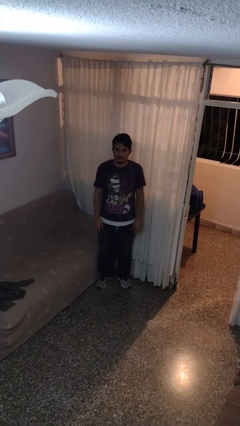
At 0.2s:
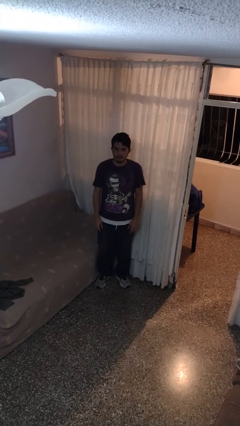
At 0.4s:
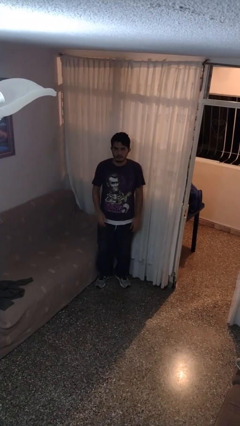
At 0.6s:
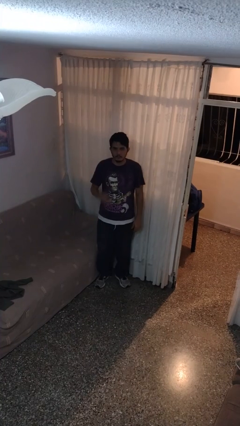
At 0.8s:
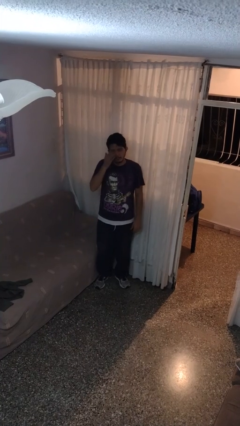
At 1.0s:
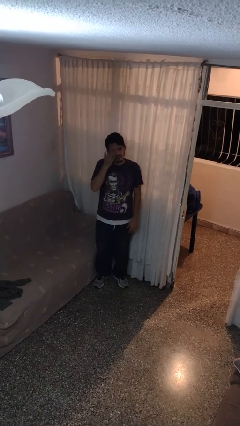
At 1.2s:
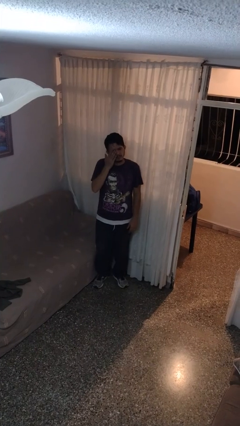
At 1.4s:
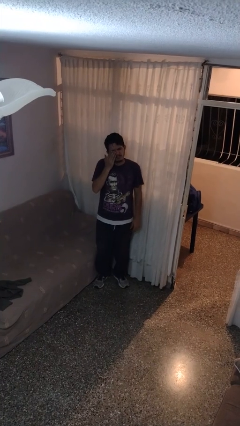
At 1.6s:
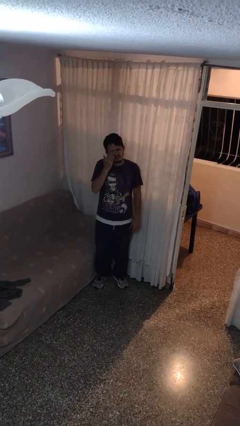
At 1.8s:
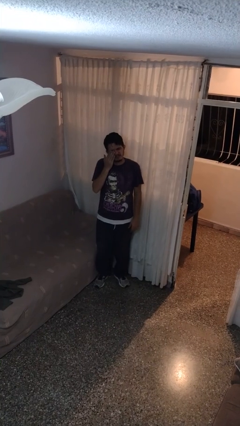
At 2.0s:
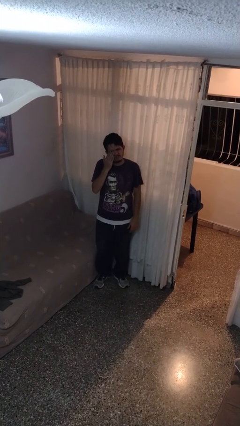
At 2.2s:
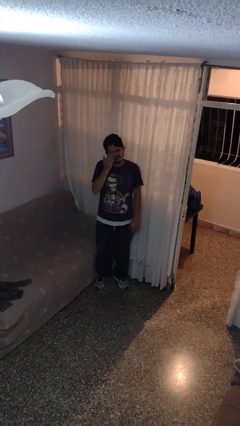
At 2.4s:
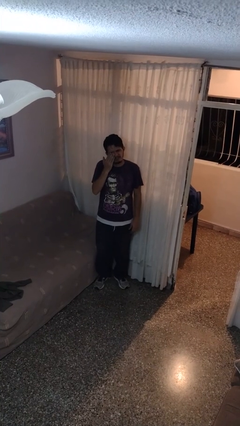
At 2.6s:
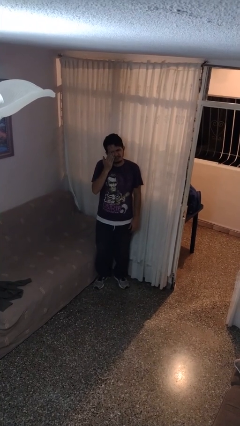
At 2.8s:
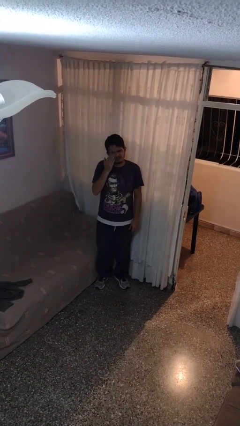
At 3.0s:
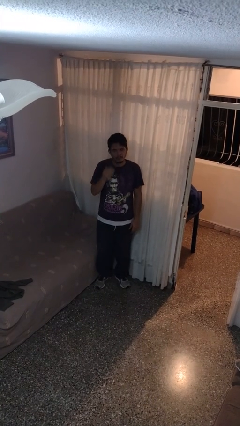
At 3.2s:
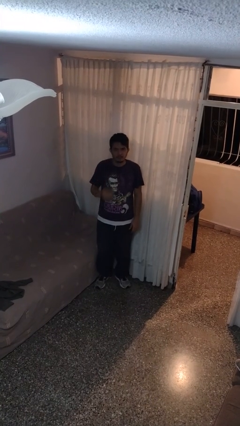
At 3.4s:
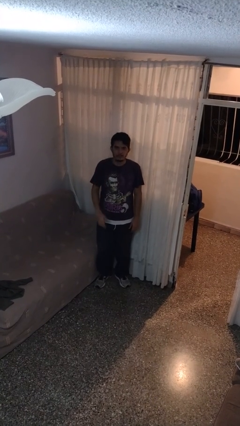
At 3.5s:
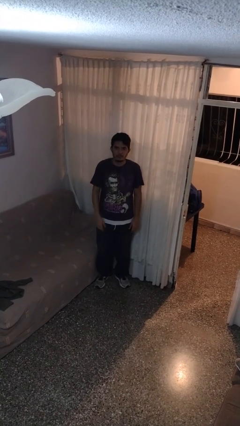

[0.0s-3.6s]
person rubs eyes

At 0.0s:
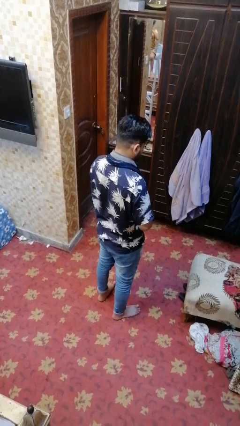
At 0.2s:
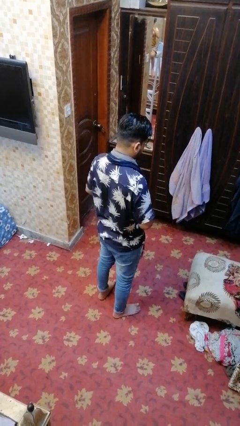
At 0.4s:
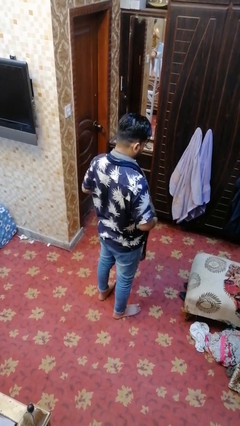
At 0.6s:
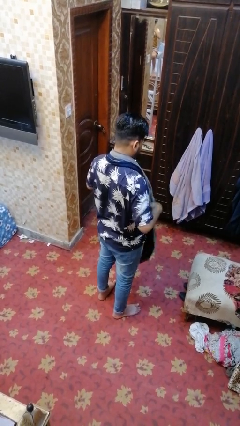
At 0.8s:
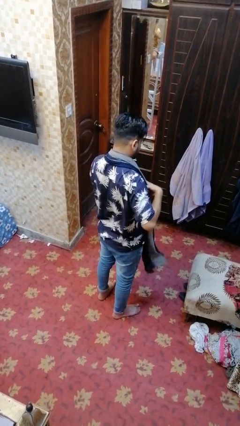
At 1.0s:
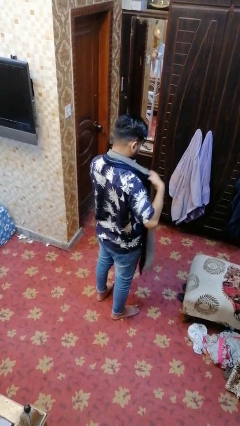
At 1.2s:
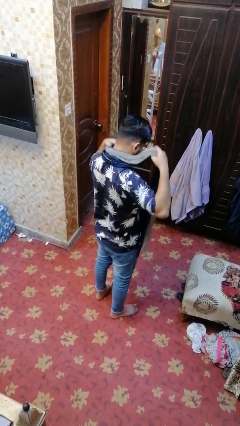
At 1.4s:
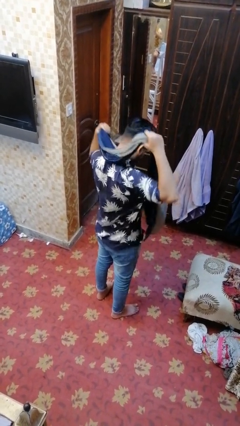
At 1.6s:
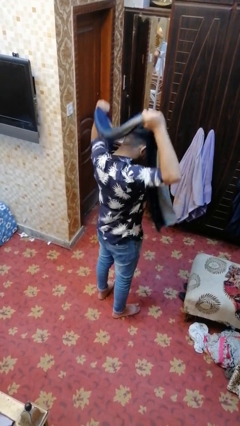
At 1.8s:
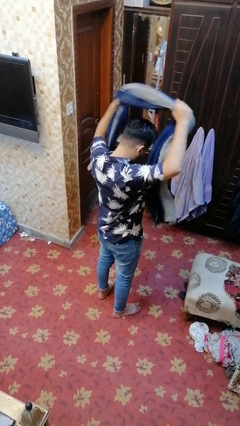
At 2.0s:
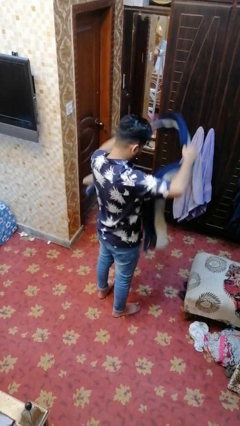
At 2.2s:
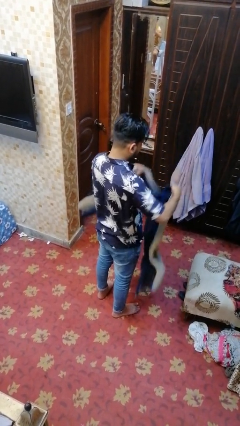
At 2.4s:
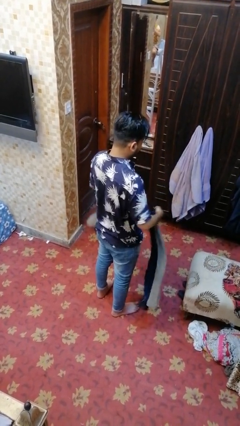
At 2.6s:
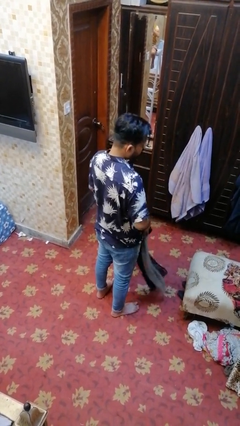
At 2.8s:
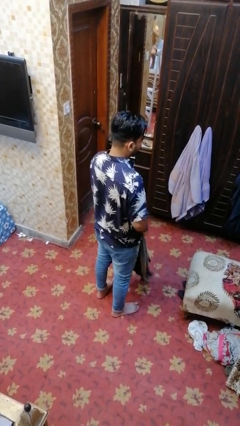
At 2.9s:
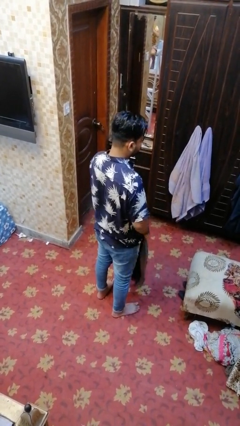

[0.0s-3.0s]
person takes off scarf

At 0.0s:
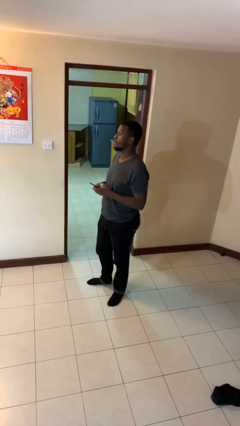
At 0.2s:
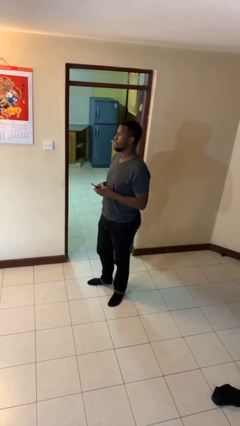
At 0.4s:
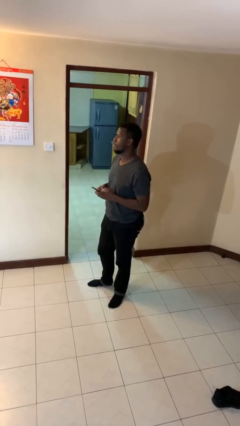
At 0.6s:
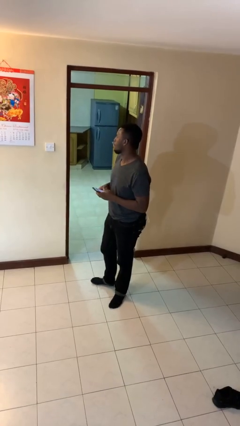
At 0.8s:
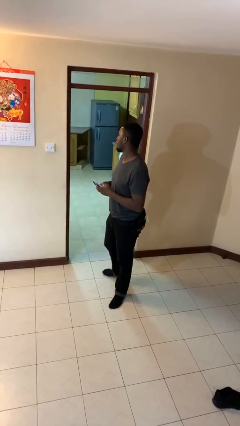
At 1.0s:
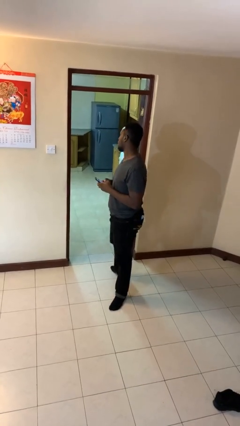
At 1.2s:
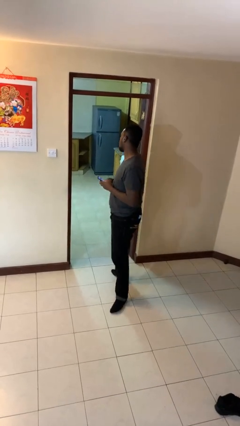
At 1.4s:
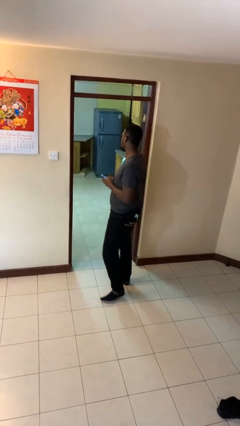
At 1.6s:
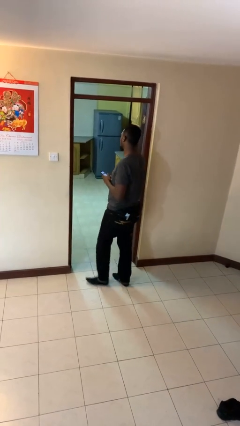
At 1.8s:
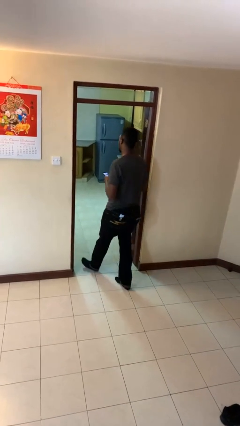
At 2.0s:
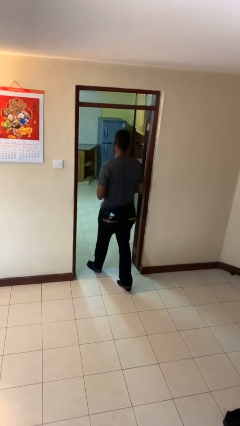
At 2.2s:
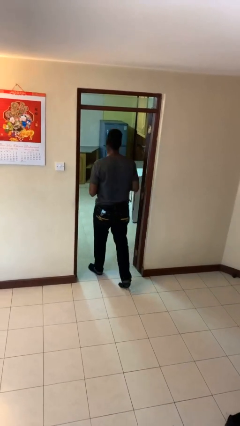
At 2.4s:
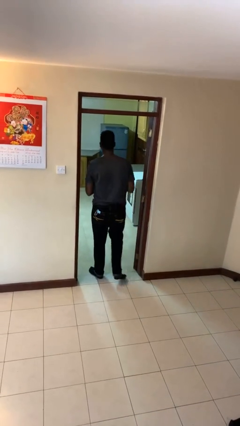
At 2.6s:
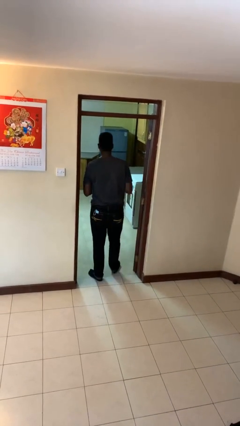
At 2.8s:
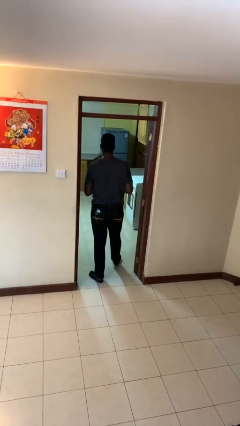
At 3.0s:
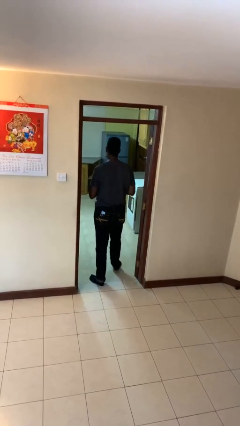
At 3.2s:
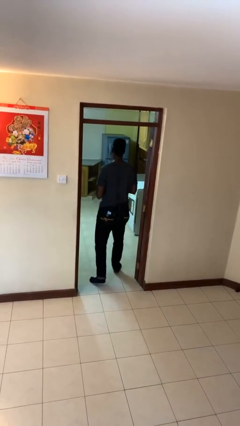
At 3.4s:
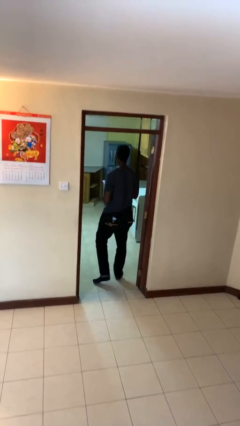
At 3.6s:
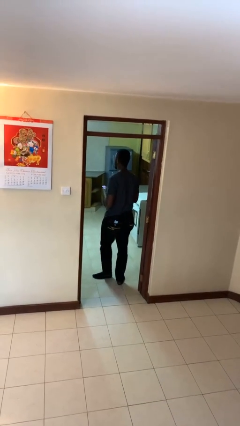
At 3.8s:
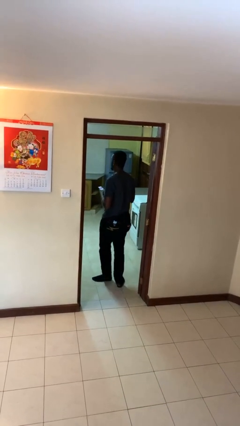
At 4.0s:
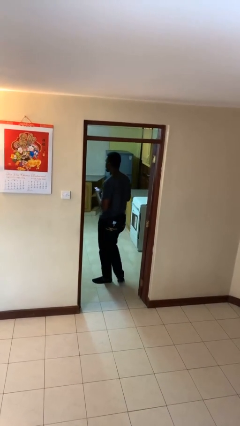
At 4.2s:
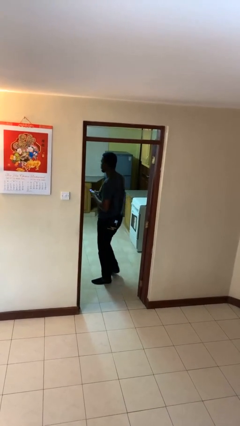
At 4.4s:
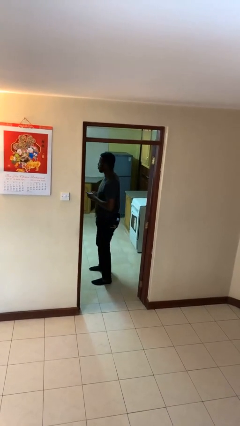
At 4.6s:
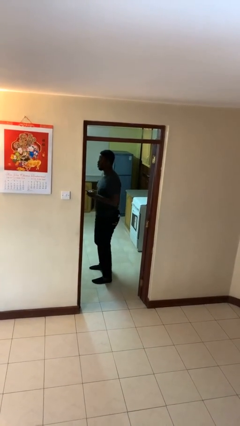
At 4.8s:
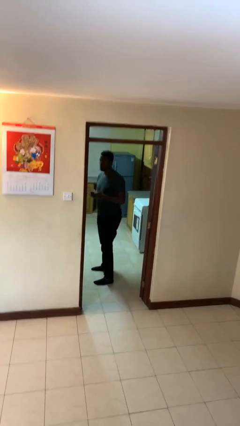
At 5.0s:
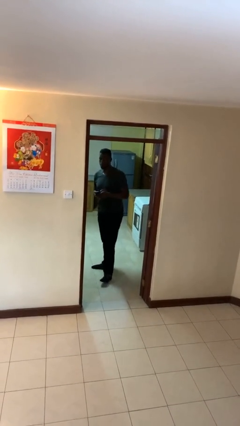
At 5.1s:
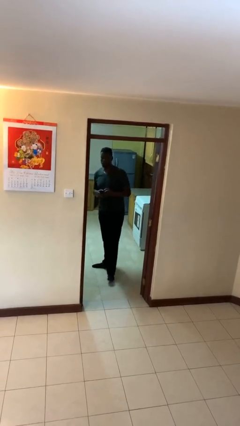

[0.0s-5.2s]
person exits scene through structure

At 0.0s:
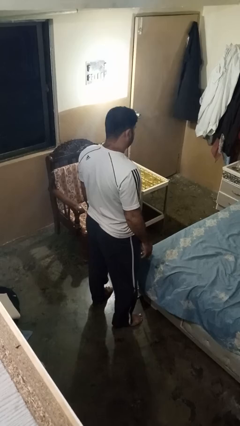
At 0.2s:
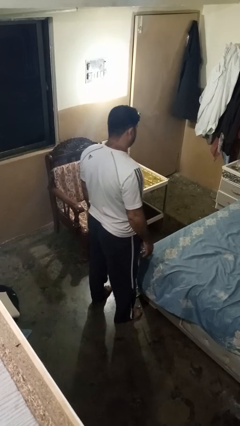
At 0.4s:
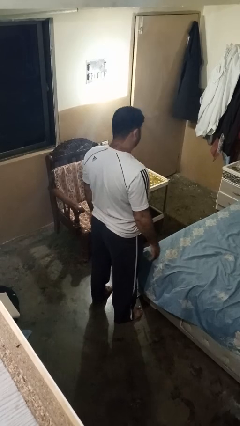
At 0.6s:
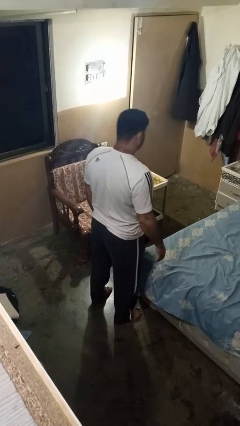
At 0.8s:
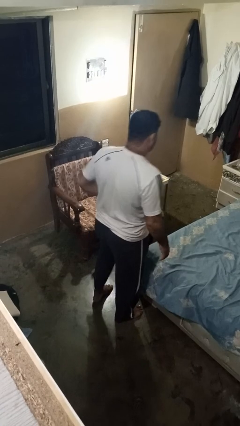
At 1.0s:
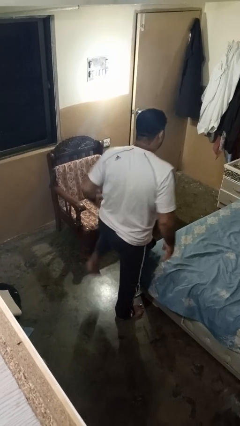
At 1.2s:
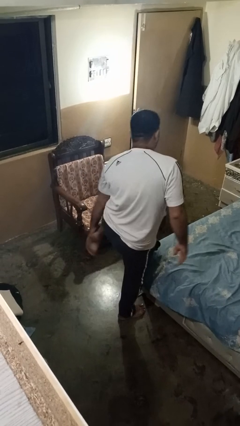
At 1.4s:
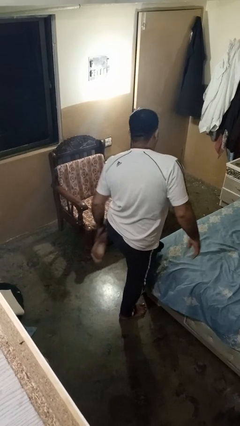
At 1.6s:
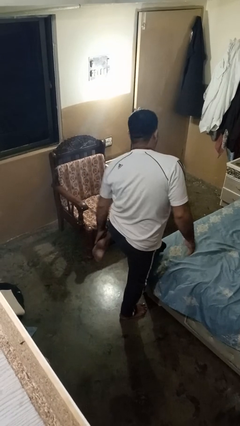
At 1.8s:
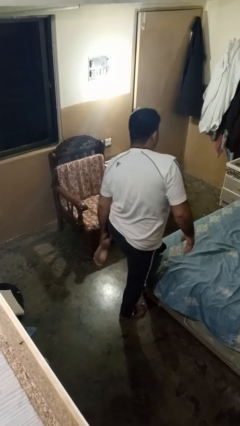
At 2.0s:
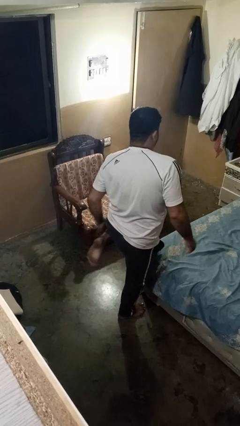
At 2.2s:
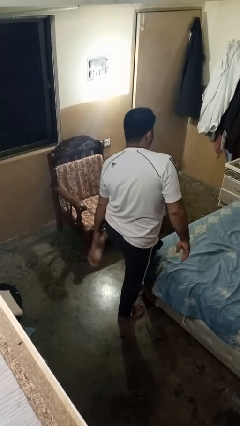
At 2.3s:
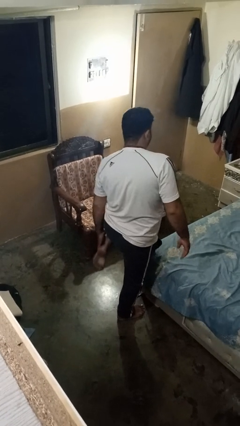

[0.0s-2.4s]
person swats bug

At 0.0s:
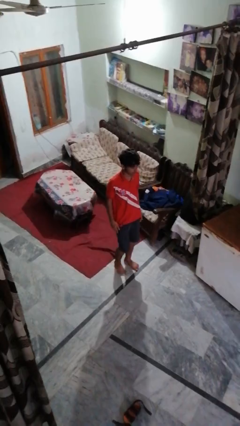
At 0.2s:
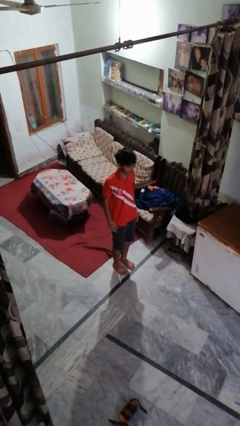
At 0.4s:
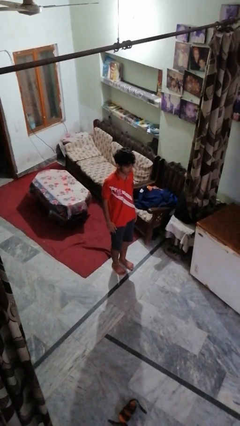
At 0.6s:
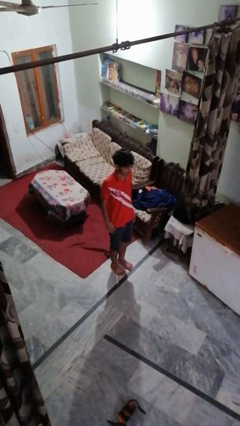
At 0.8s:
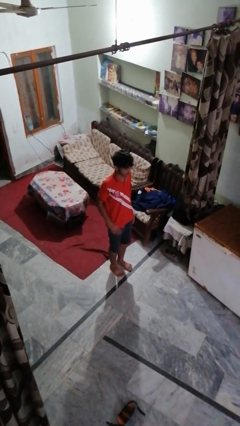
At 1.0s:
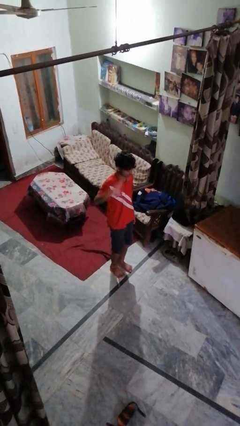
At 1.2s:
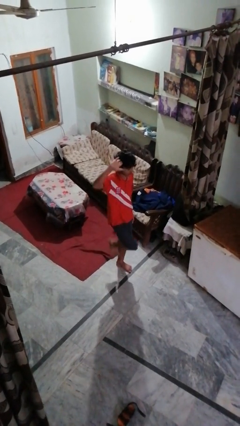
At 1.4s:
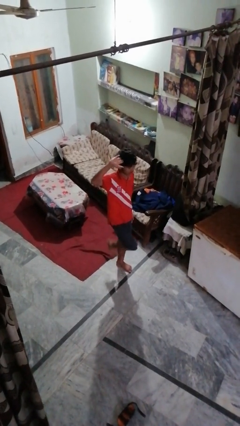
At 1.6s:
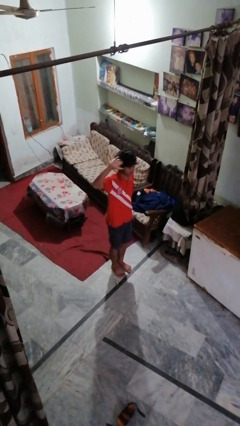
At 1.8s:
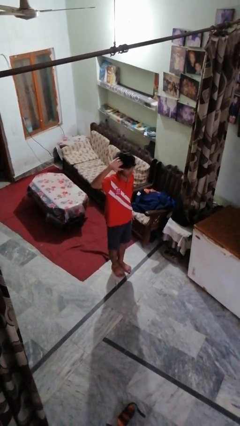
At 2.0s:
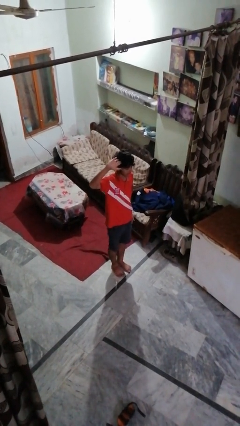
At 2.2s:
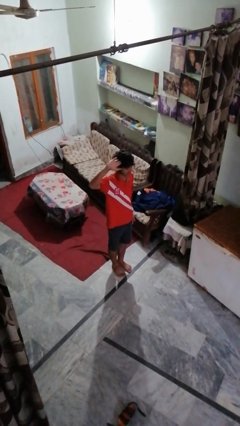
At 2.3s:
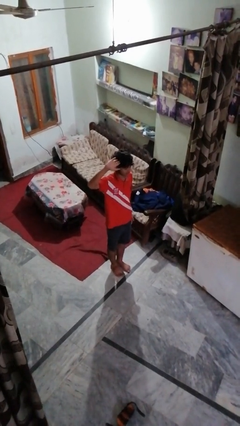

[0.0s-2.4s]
person salutes

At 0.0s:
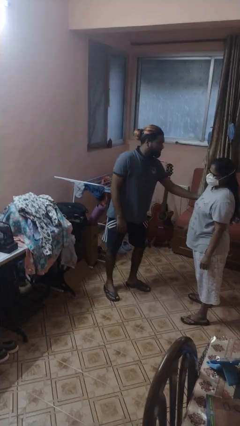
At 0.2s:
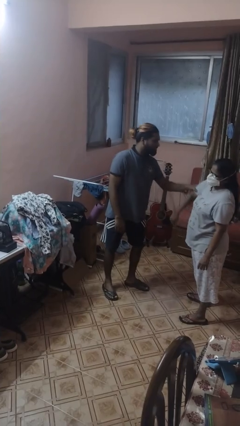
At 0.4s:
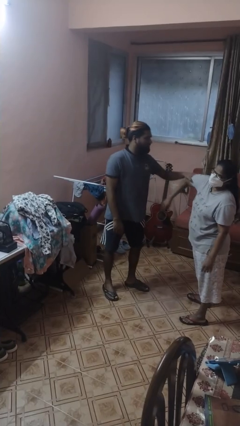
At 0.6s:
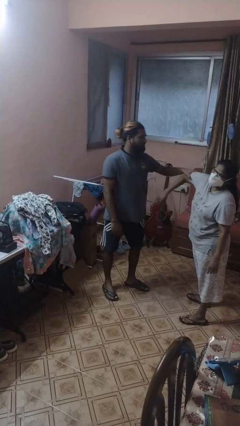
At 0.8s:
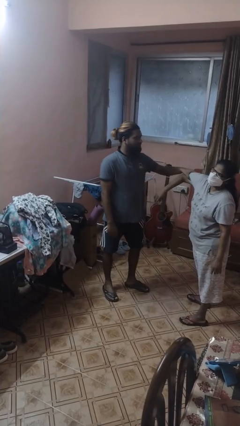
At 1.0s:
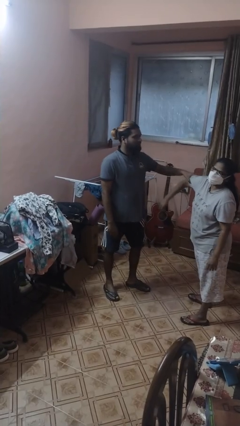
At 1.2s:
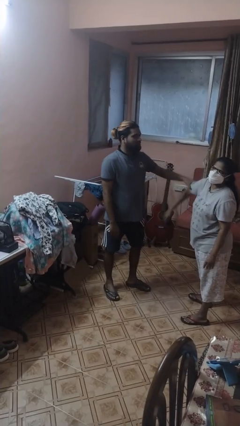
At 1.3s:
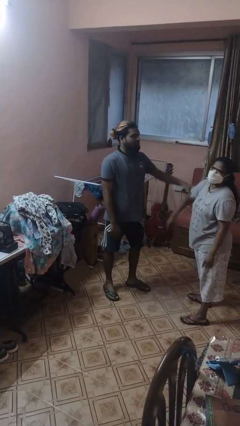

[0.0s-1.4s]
person grabs person by bicep
